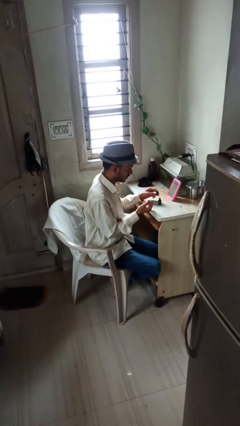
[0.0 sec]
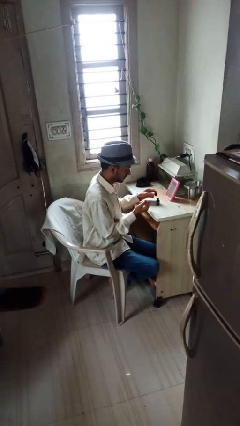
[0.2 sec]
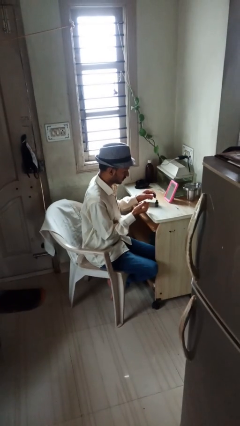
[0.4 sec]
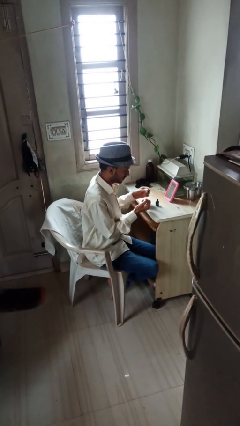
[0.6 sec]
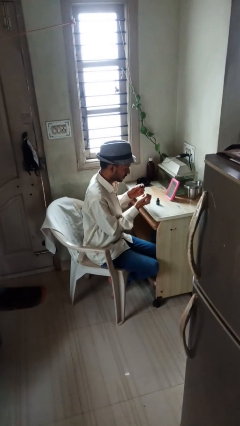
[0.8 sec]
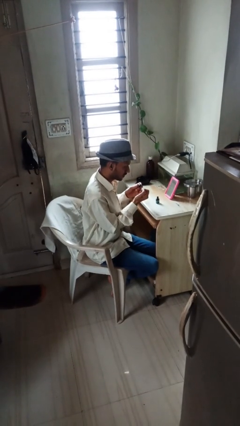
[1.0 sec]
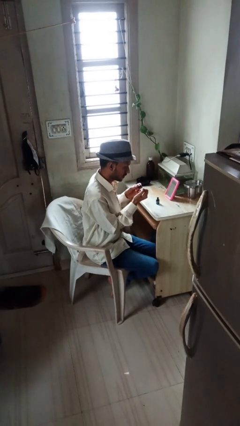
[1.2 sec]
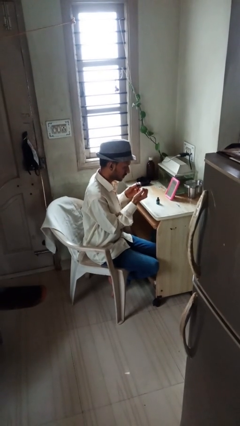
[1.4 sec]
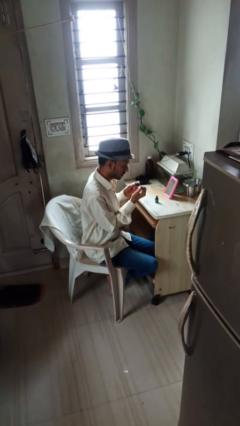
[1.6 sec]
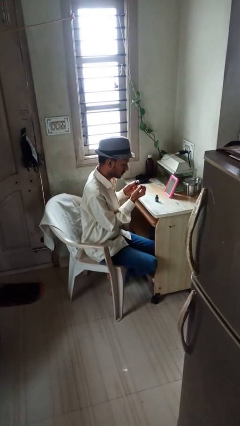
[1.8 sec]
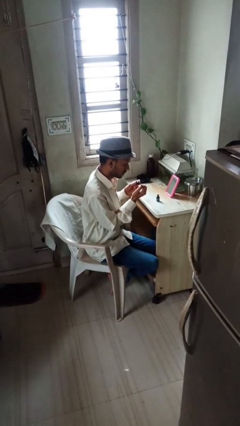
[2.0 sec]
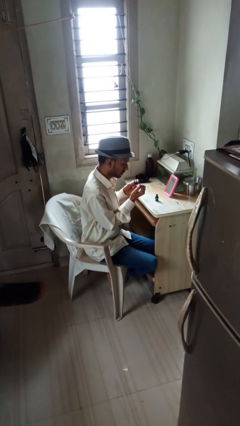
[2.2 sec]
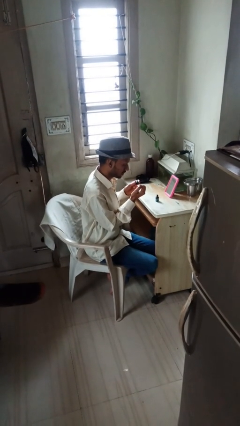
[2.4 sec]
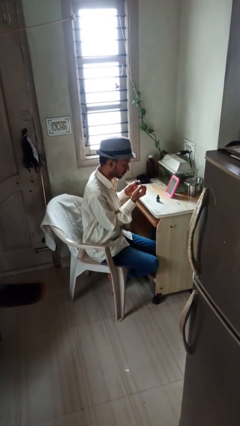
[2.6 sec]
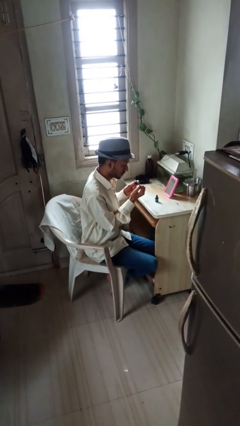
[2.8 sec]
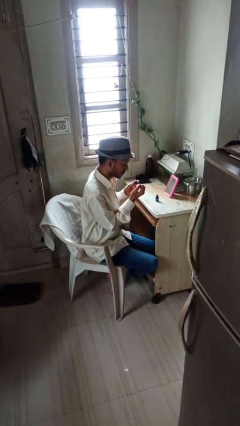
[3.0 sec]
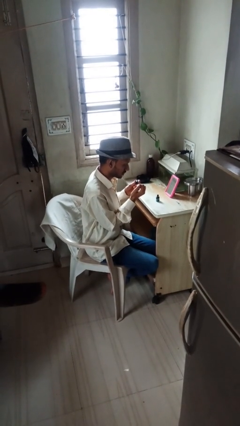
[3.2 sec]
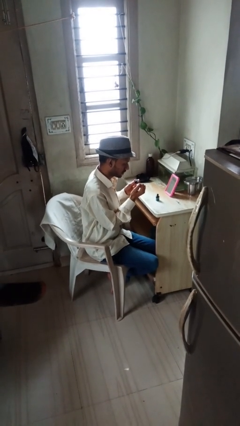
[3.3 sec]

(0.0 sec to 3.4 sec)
person paints fingernails

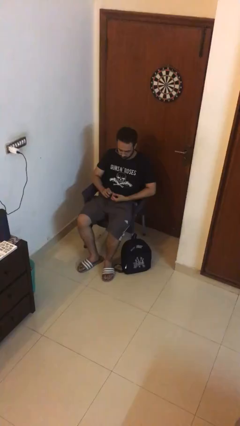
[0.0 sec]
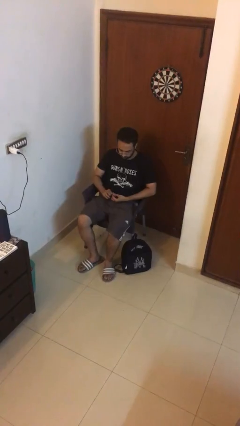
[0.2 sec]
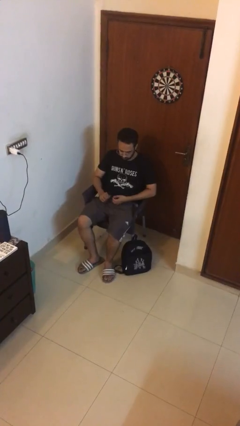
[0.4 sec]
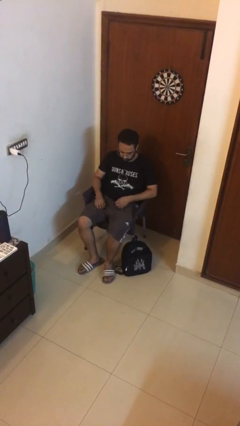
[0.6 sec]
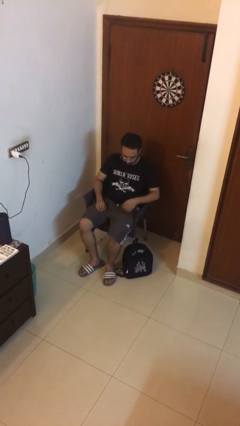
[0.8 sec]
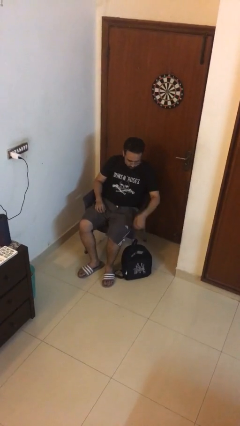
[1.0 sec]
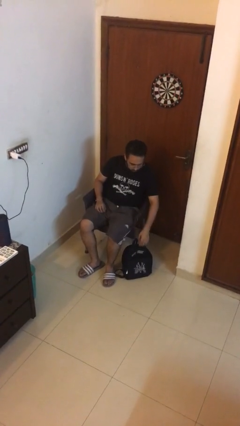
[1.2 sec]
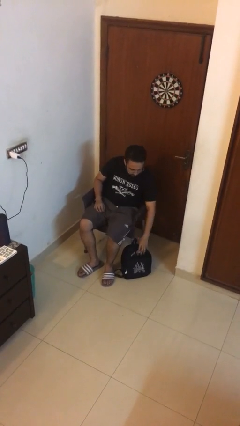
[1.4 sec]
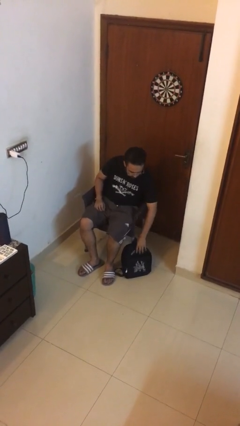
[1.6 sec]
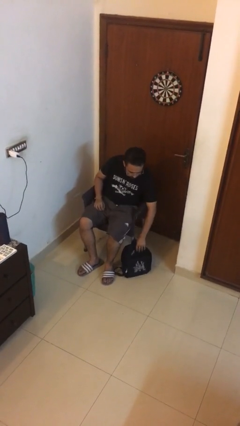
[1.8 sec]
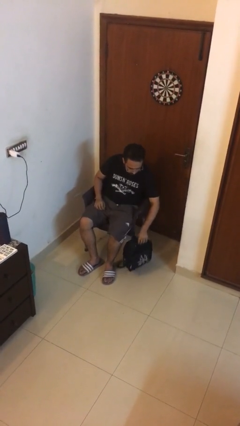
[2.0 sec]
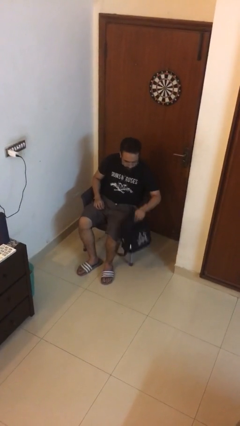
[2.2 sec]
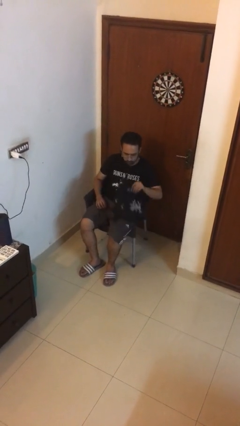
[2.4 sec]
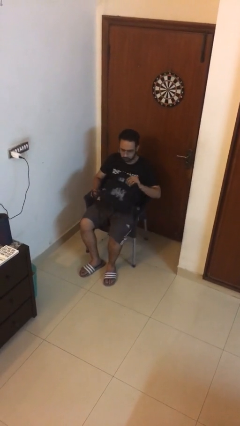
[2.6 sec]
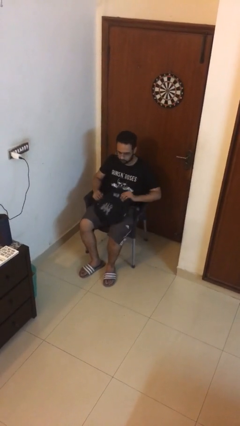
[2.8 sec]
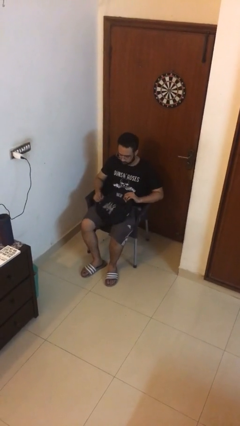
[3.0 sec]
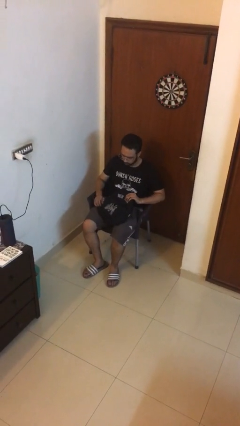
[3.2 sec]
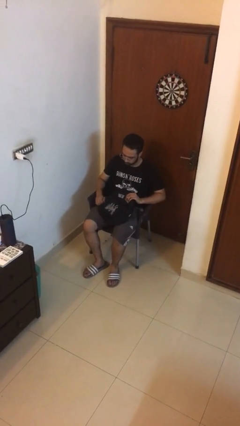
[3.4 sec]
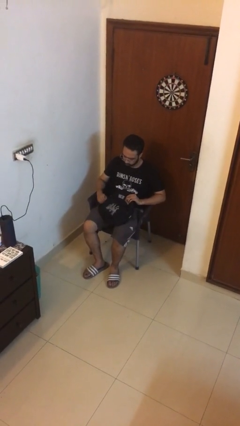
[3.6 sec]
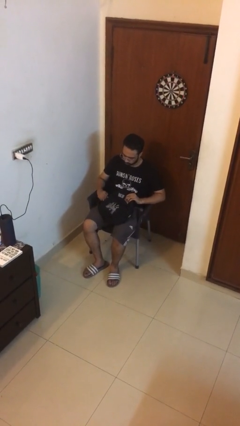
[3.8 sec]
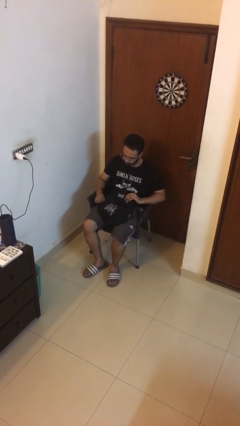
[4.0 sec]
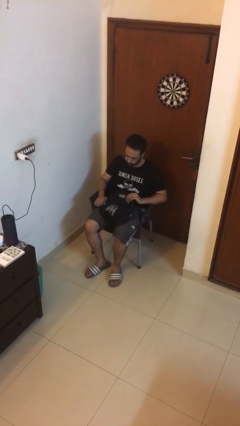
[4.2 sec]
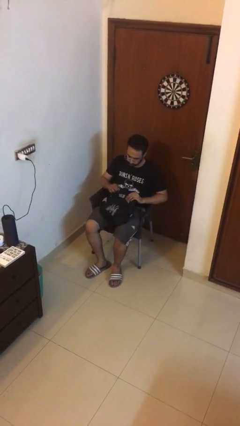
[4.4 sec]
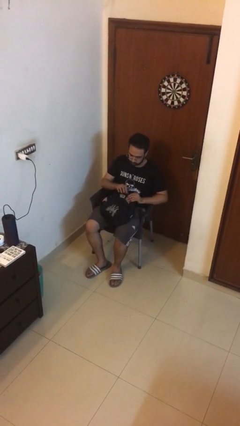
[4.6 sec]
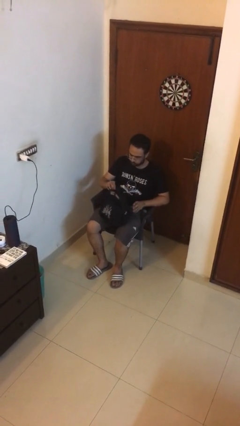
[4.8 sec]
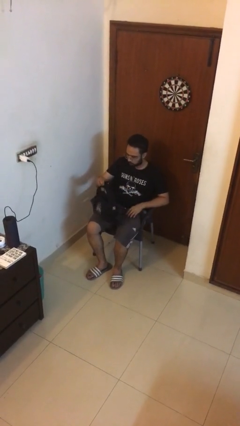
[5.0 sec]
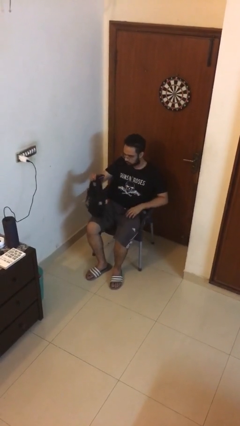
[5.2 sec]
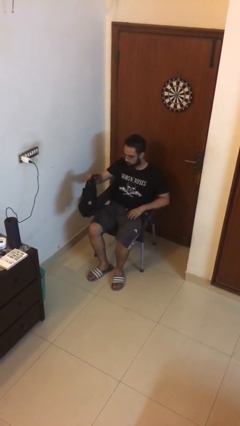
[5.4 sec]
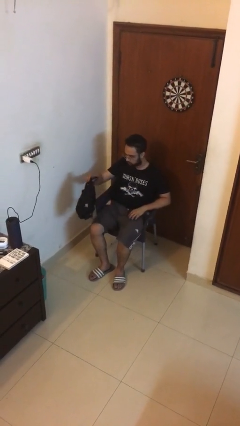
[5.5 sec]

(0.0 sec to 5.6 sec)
person picks up object from floor

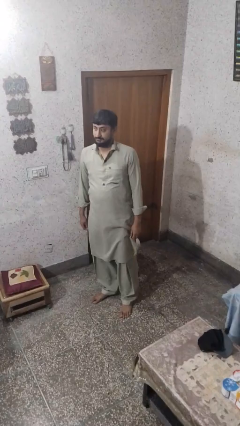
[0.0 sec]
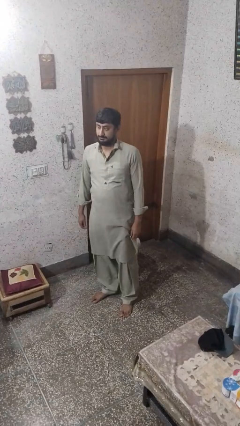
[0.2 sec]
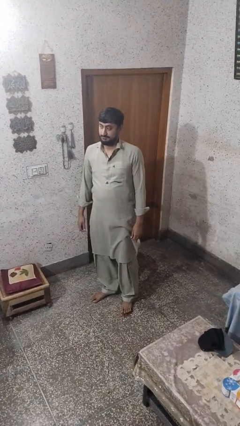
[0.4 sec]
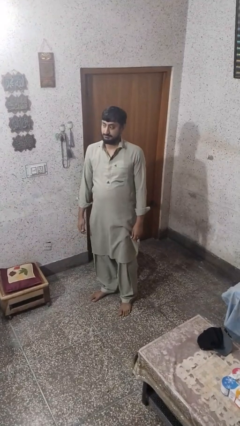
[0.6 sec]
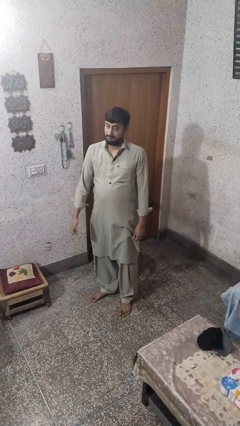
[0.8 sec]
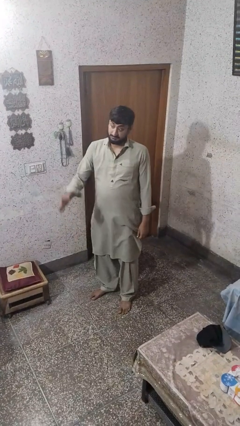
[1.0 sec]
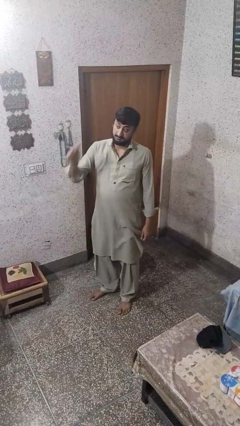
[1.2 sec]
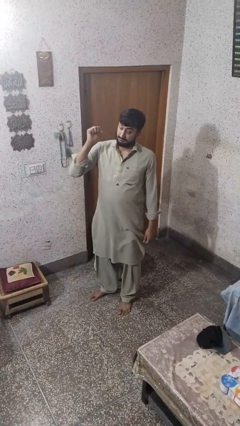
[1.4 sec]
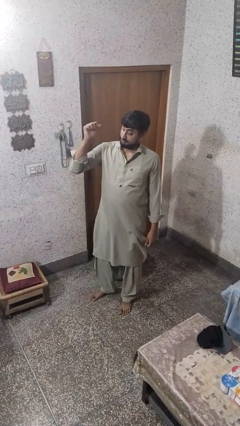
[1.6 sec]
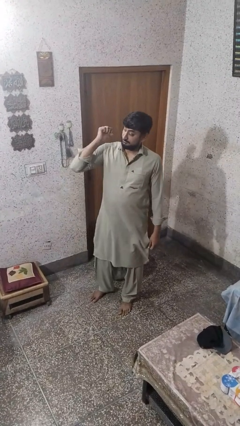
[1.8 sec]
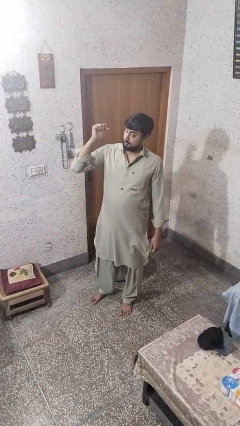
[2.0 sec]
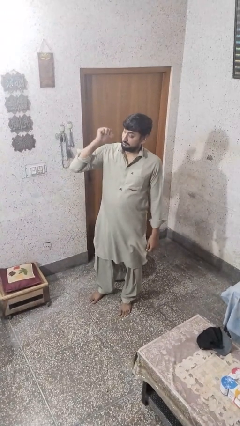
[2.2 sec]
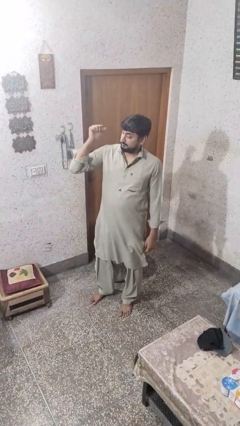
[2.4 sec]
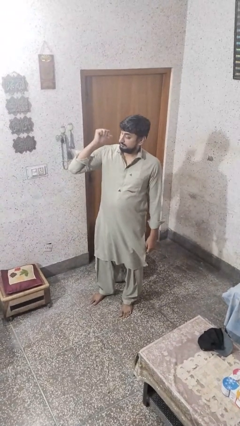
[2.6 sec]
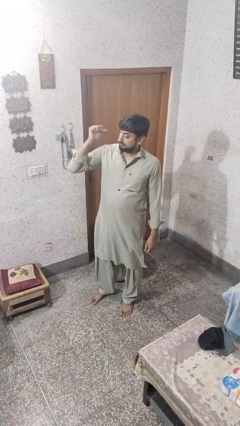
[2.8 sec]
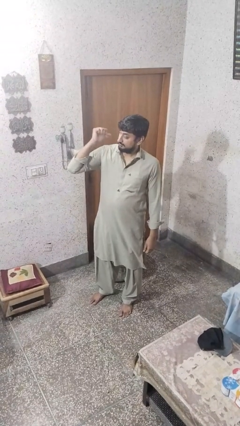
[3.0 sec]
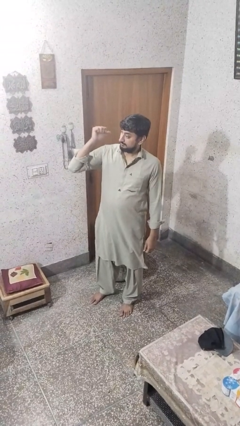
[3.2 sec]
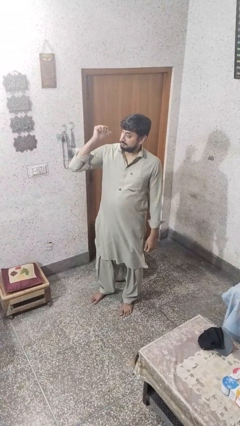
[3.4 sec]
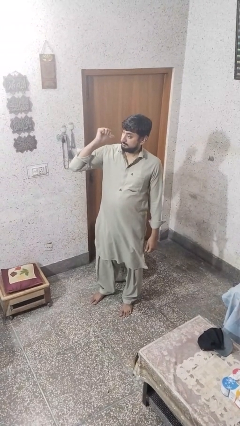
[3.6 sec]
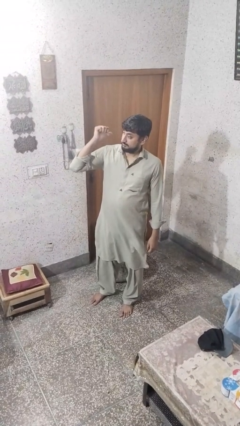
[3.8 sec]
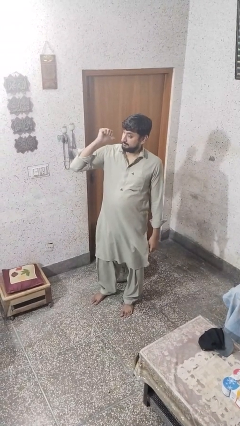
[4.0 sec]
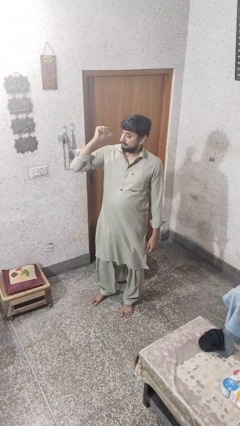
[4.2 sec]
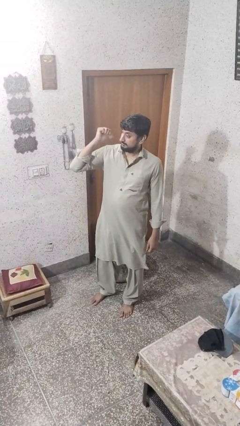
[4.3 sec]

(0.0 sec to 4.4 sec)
person gestures behind me

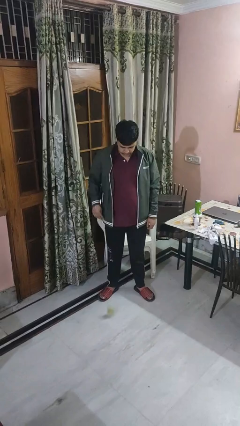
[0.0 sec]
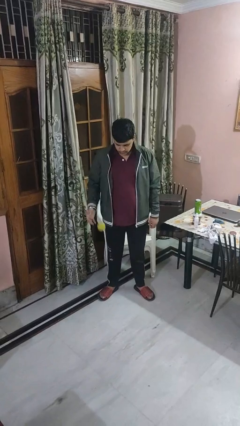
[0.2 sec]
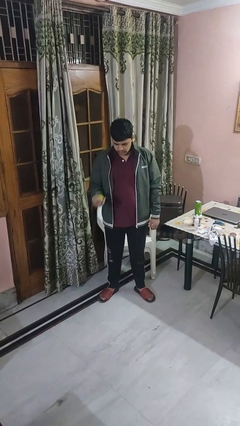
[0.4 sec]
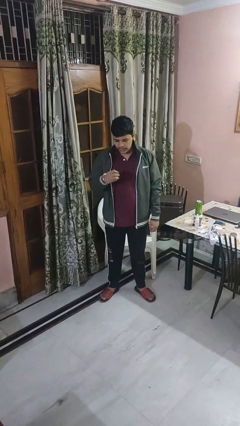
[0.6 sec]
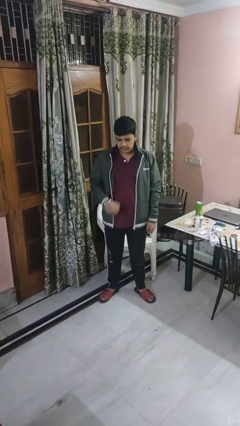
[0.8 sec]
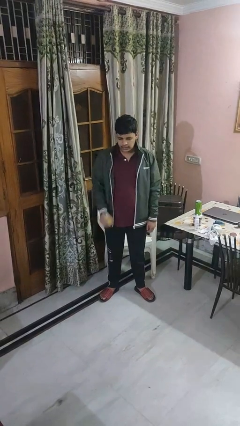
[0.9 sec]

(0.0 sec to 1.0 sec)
person bounces ball on floor

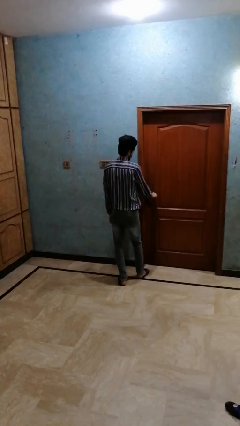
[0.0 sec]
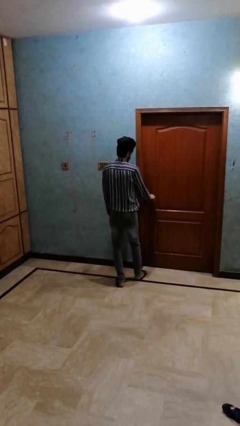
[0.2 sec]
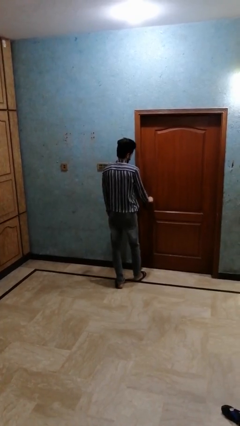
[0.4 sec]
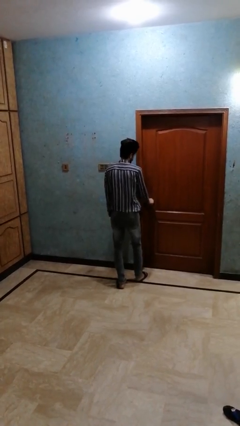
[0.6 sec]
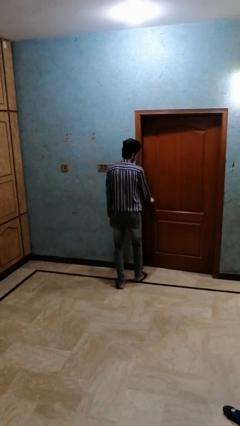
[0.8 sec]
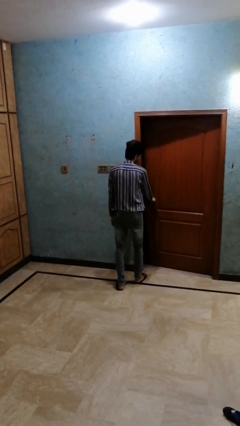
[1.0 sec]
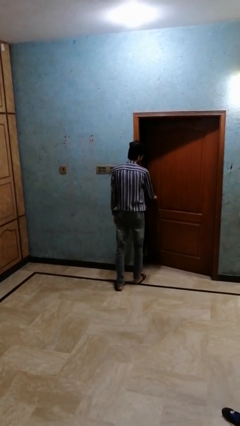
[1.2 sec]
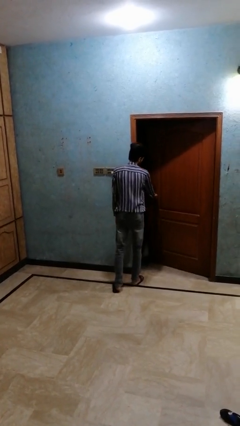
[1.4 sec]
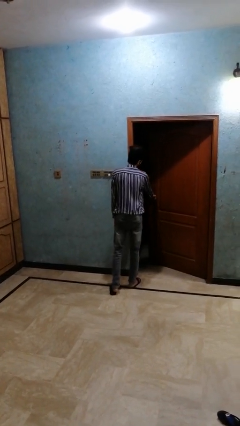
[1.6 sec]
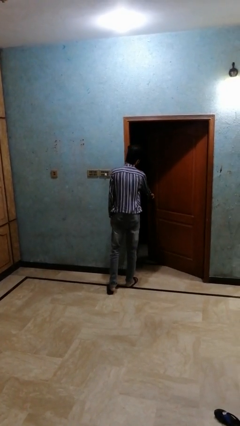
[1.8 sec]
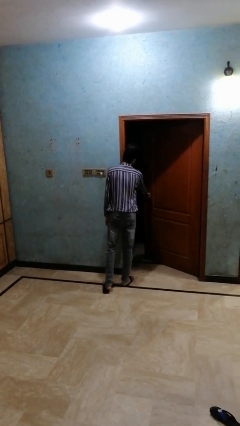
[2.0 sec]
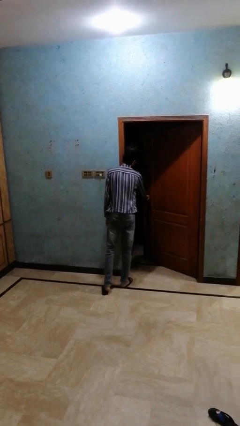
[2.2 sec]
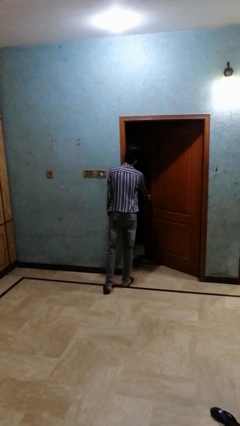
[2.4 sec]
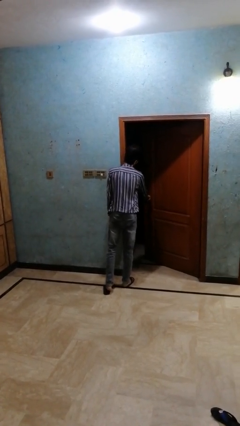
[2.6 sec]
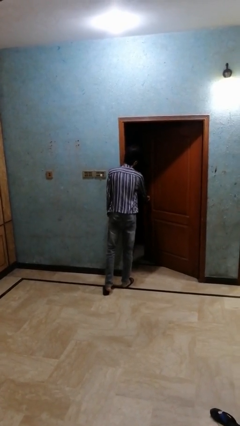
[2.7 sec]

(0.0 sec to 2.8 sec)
person opens closet door

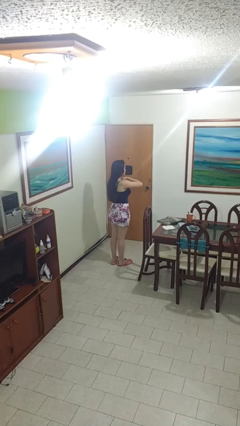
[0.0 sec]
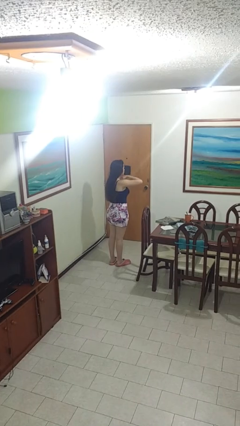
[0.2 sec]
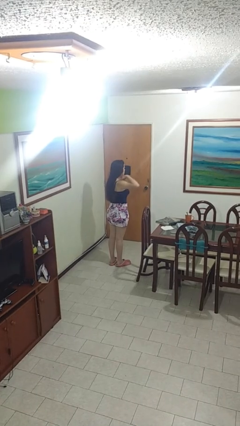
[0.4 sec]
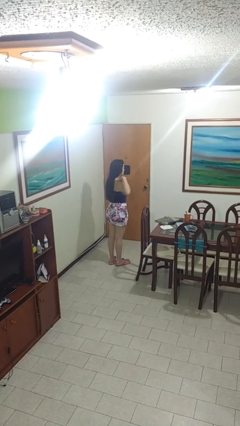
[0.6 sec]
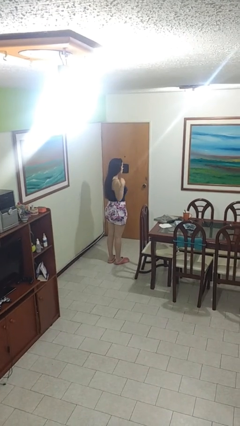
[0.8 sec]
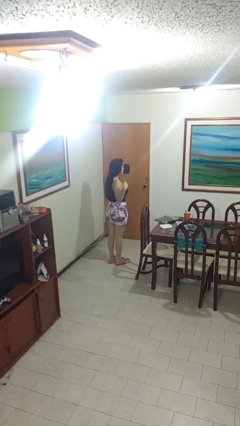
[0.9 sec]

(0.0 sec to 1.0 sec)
person gestures cut
